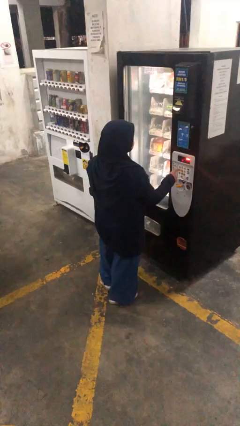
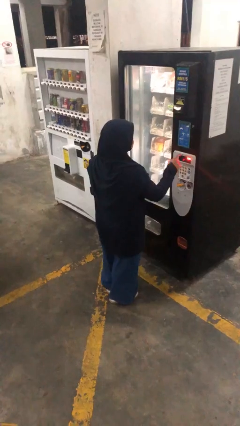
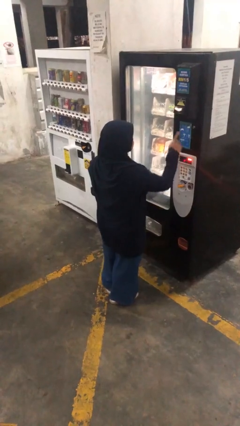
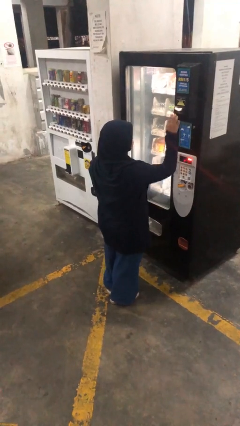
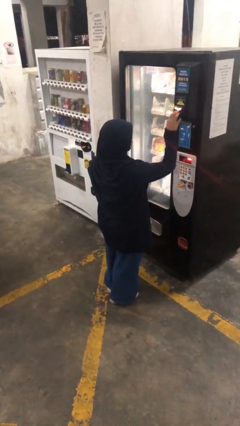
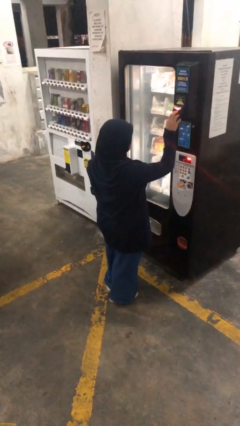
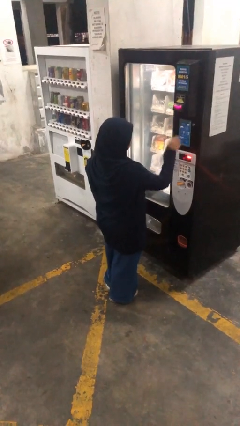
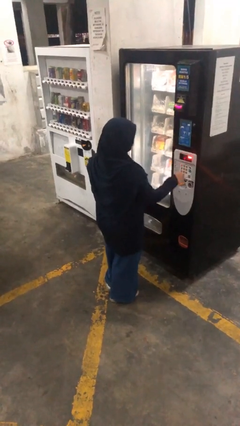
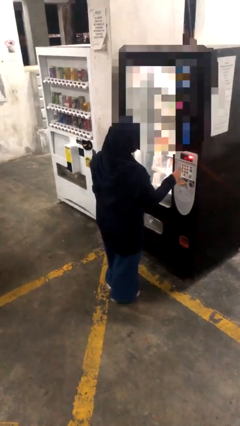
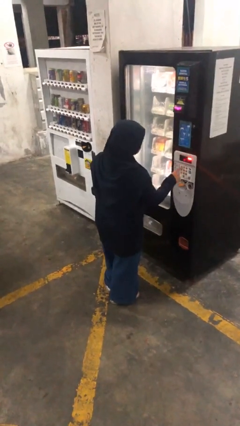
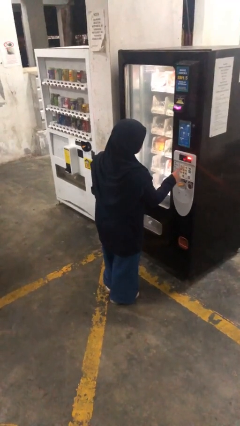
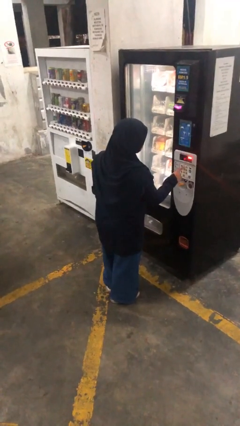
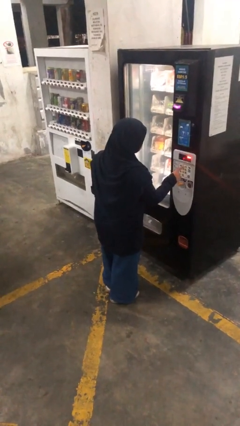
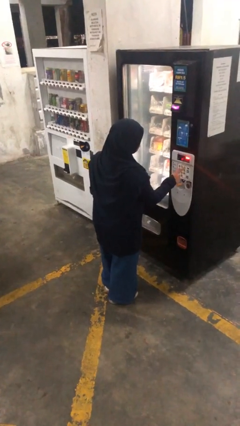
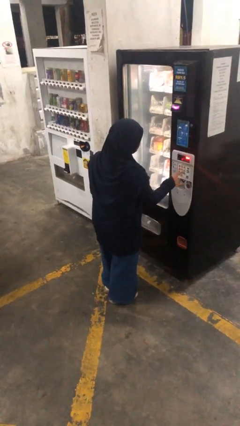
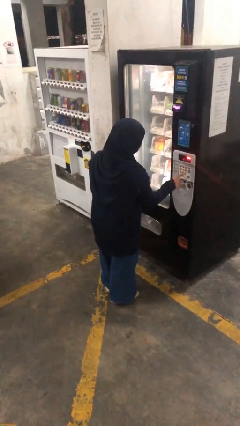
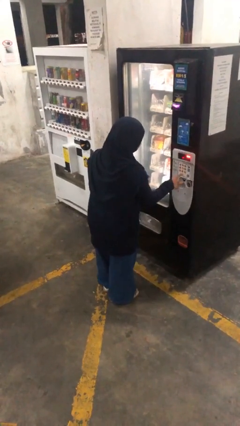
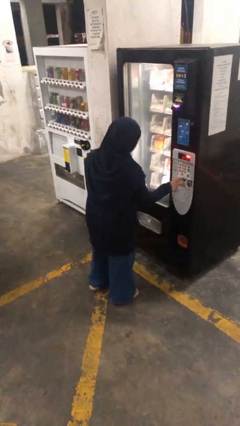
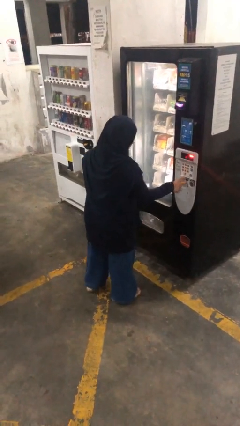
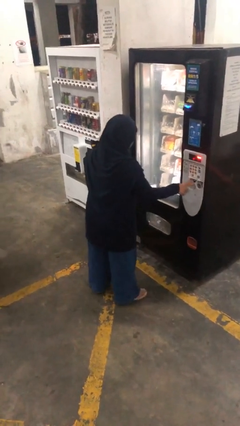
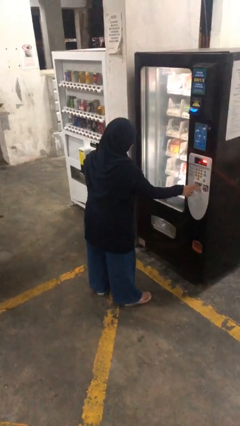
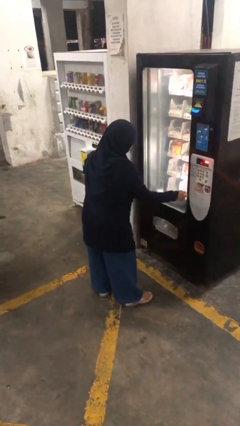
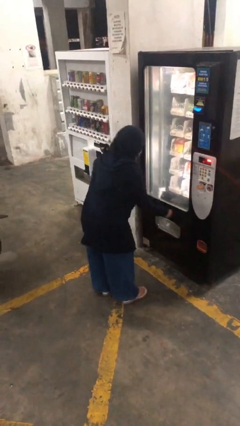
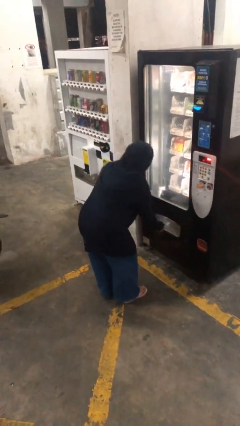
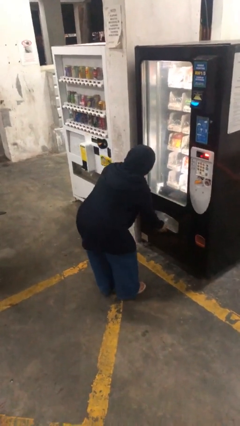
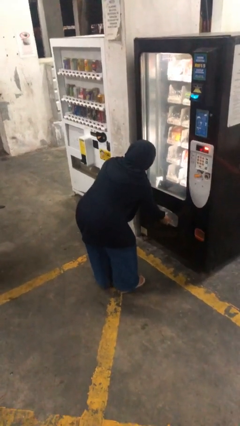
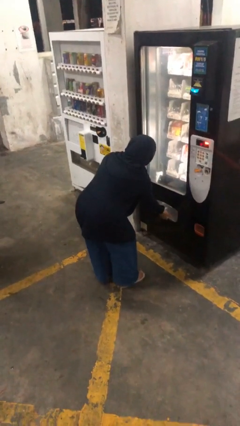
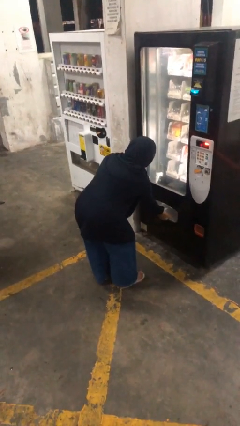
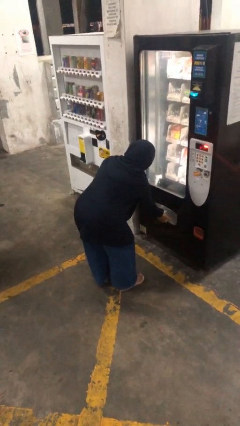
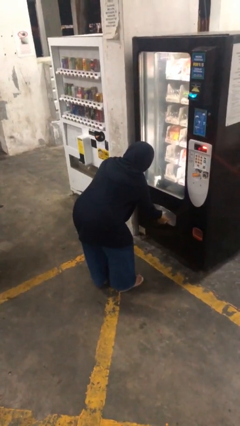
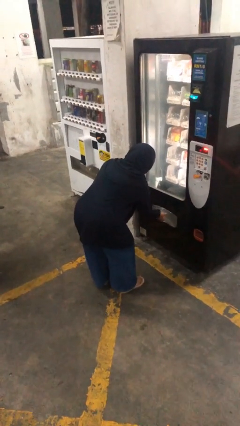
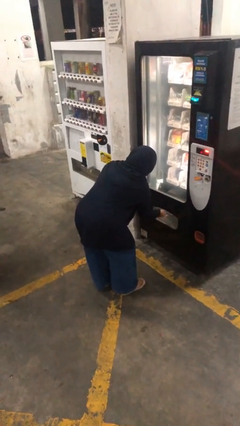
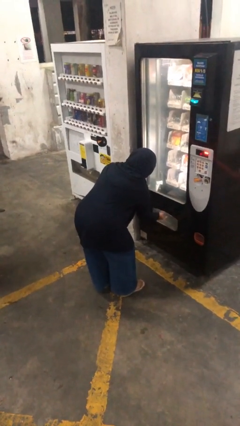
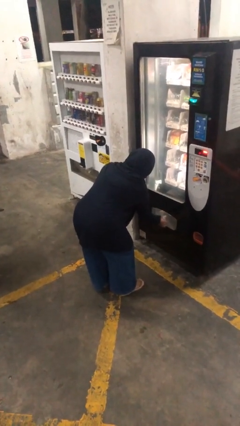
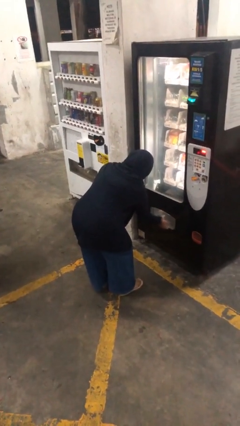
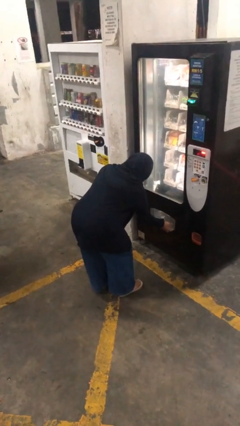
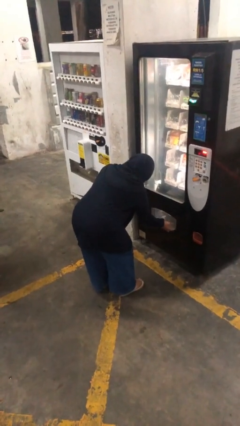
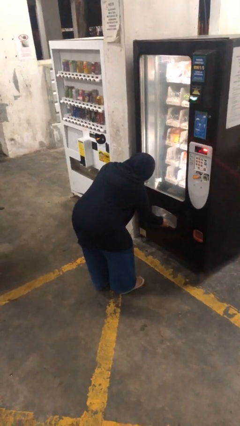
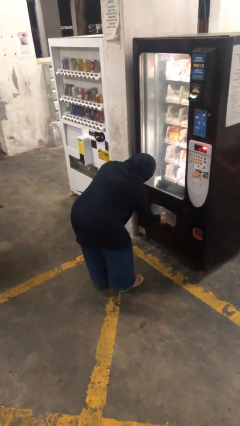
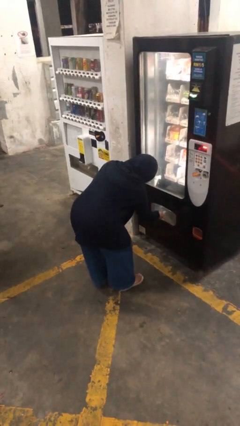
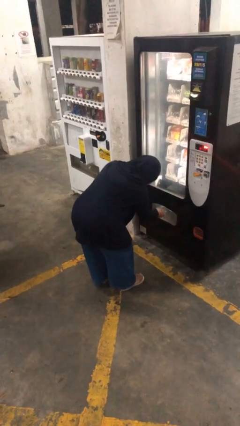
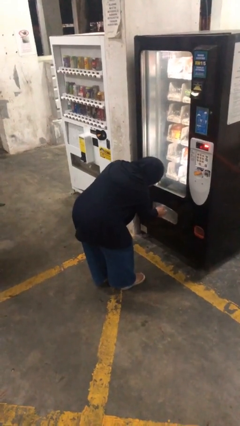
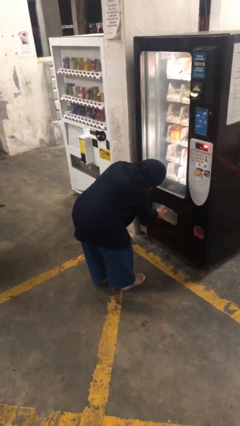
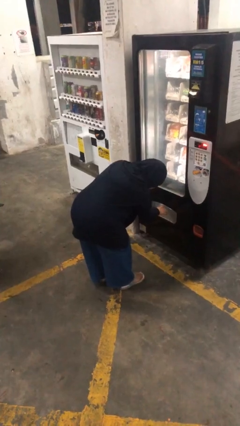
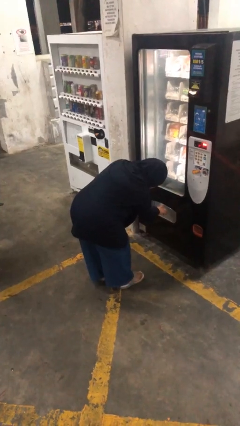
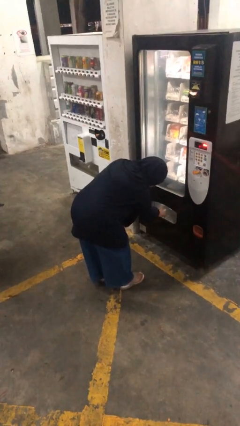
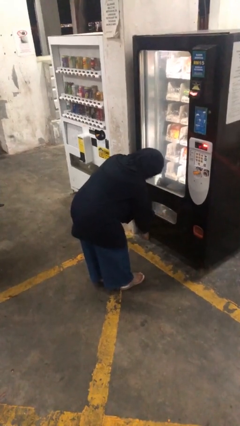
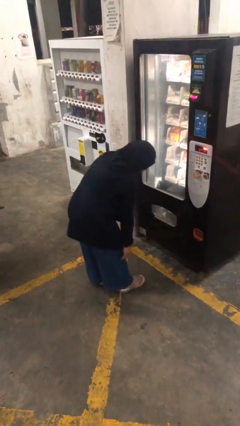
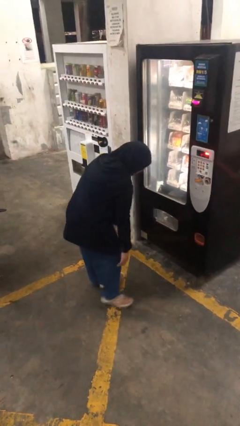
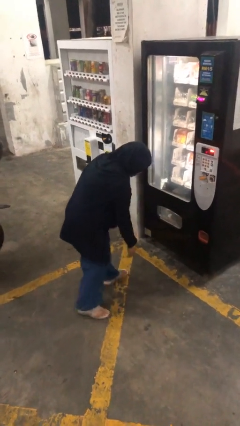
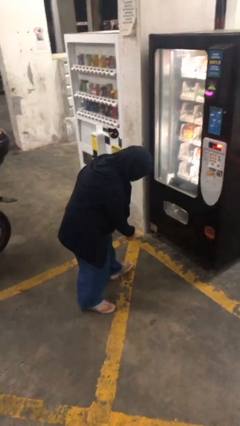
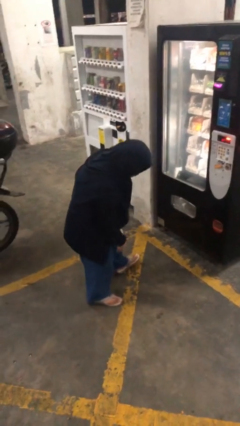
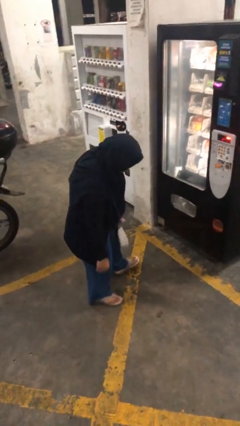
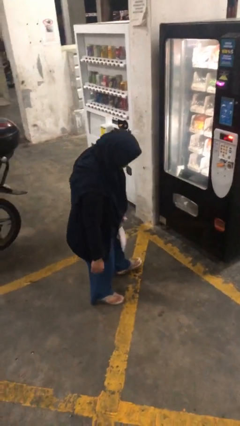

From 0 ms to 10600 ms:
person purchases from machine

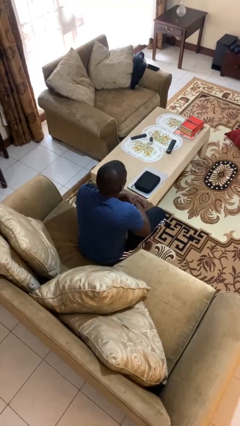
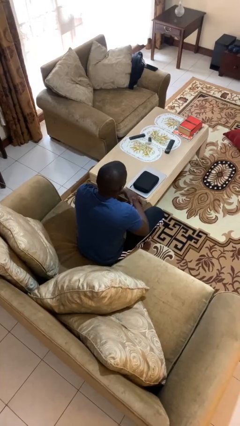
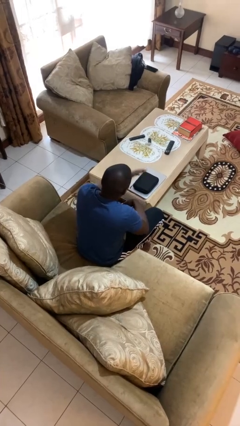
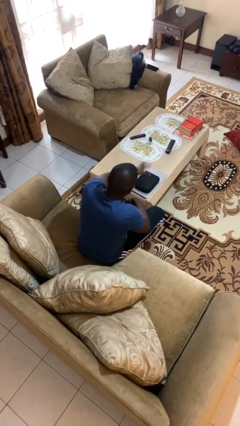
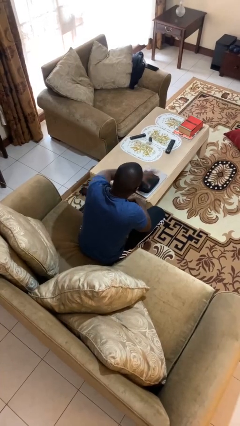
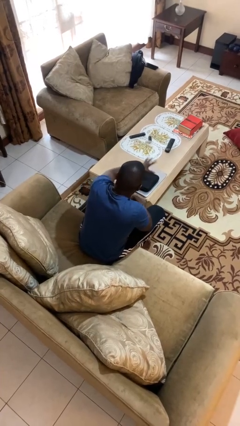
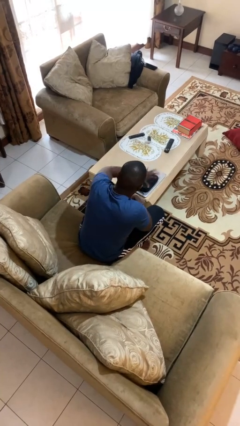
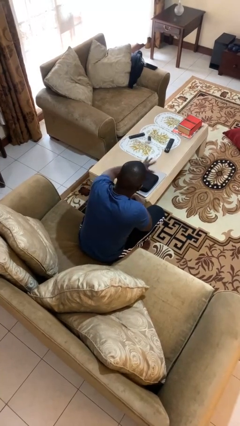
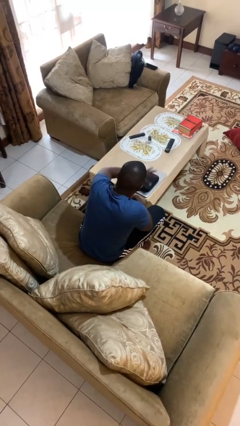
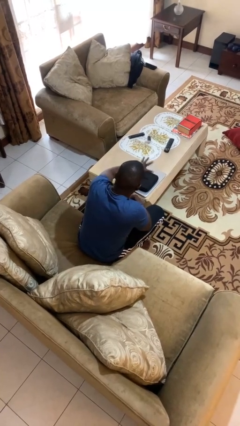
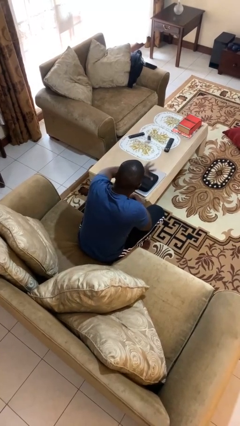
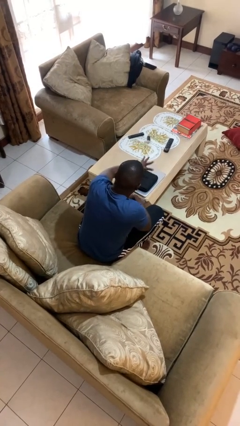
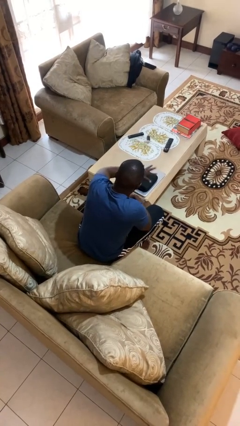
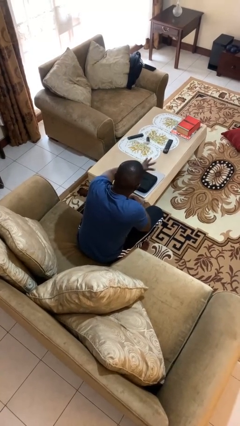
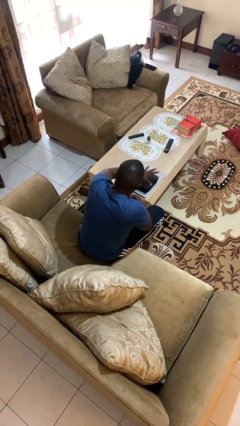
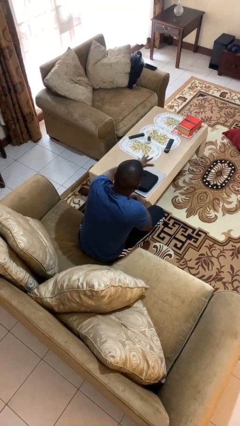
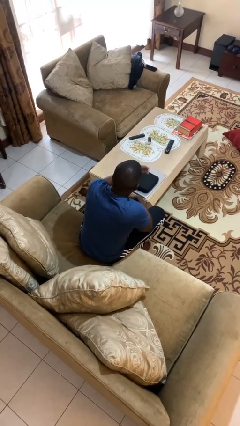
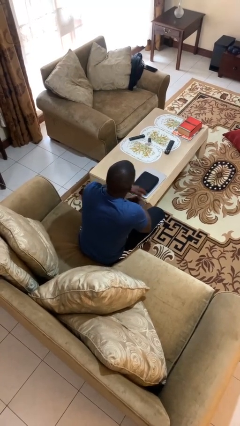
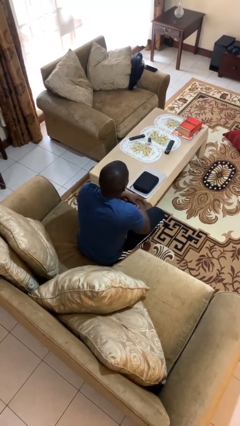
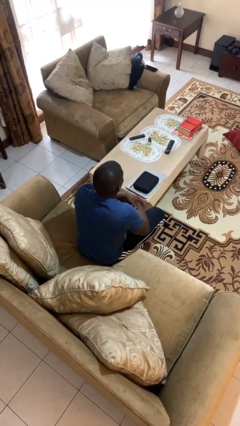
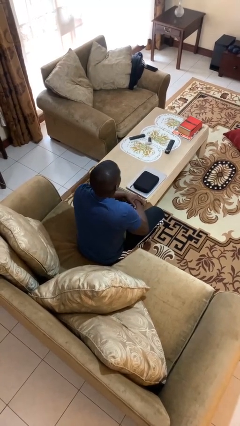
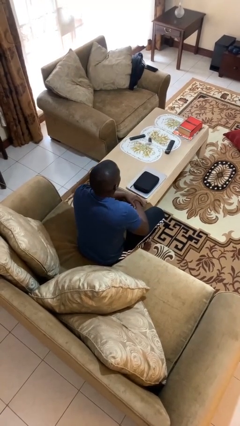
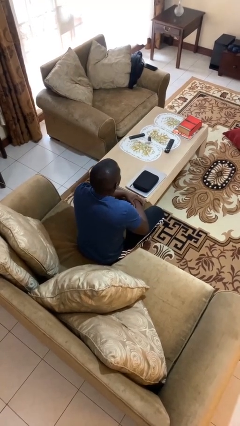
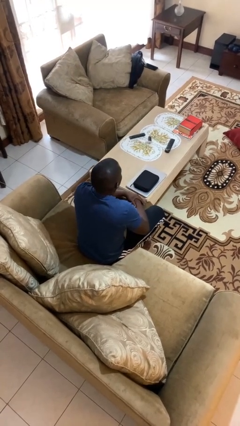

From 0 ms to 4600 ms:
person waves hand over object

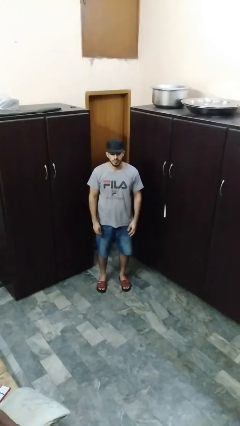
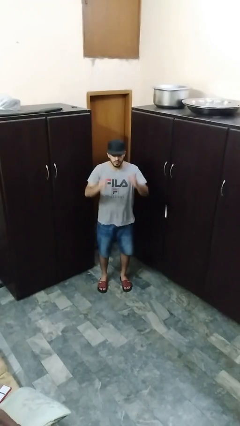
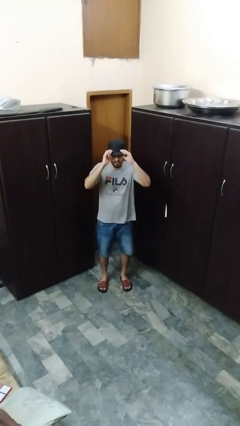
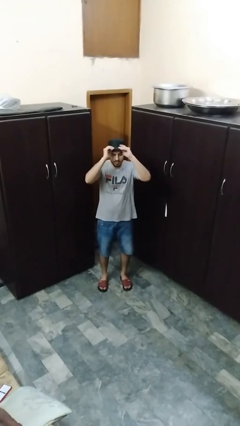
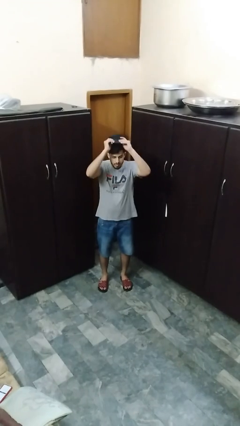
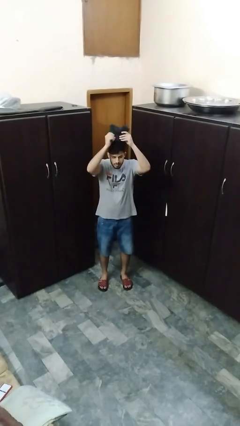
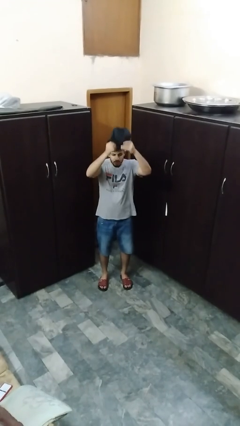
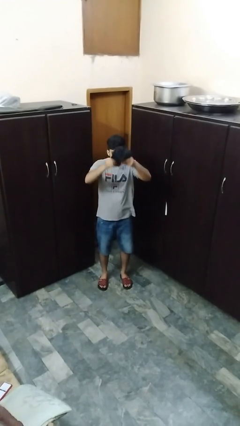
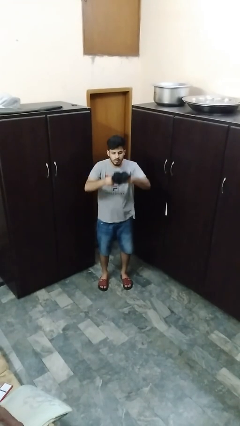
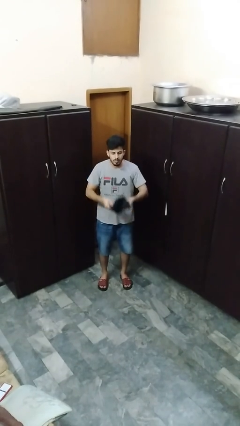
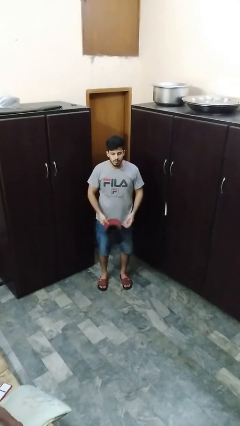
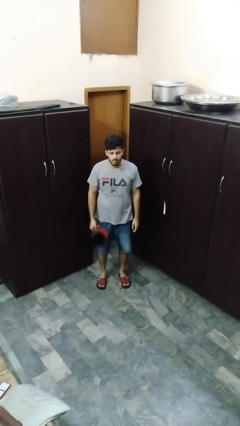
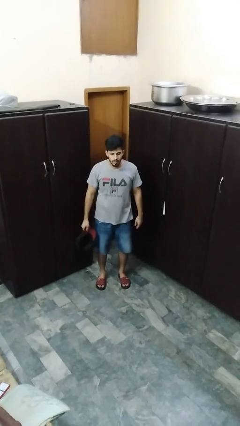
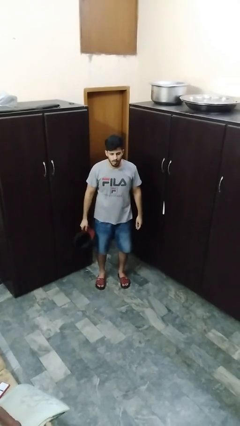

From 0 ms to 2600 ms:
person takes off hat

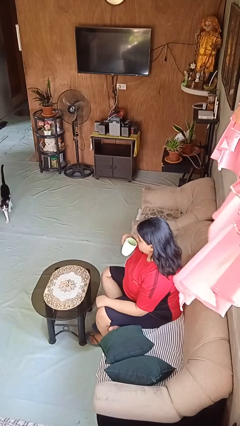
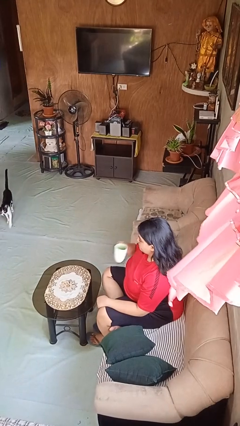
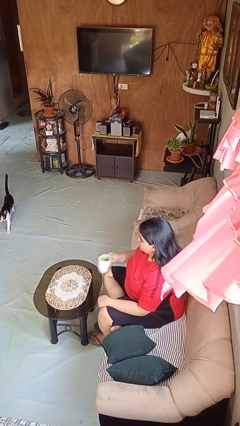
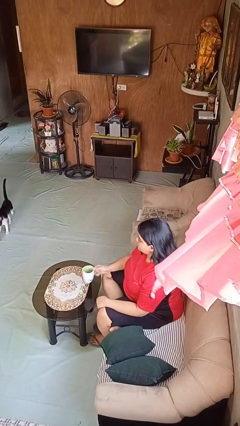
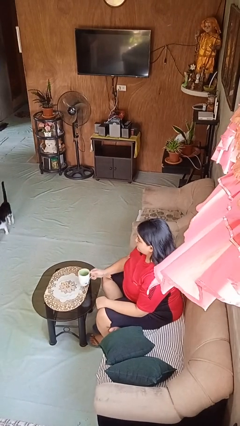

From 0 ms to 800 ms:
person puts down object on table
